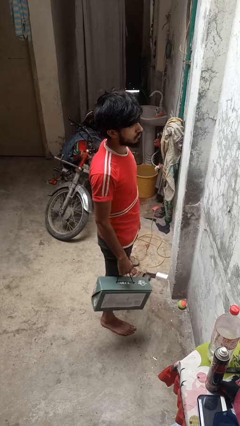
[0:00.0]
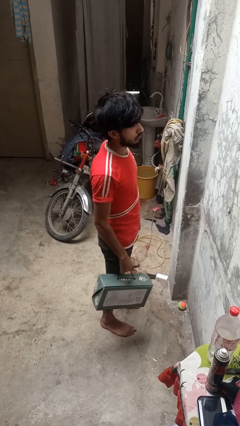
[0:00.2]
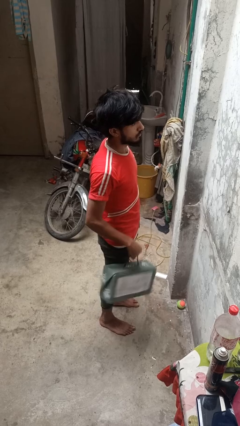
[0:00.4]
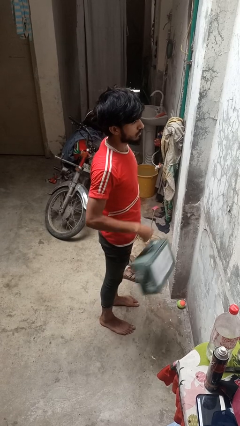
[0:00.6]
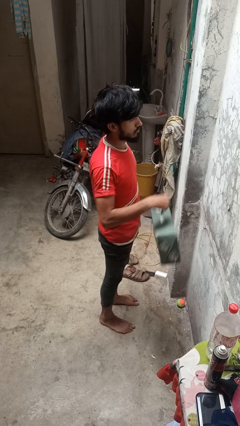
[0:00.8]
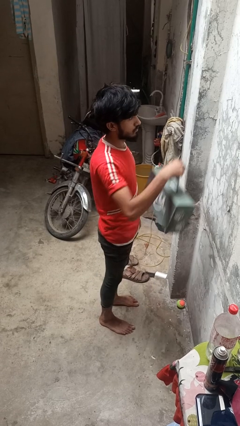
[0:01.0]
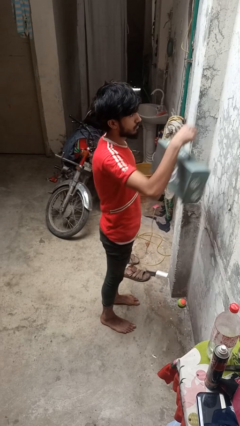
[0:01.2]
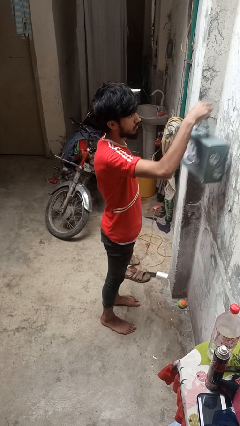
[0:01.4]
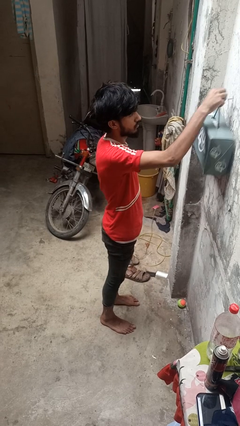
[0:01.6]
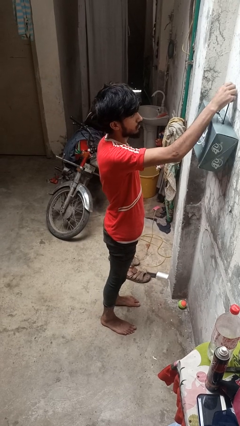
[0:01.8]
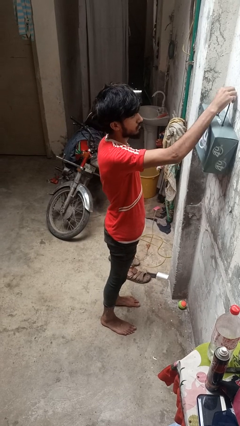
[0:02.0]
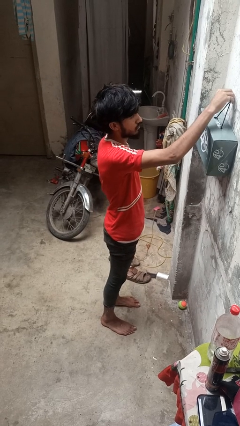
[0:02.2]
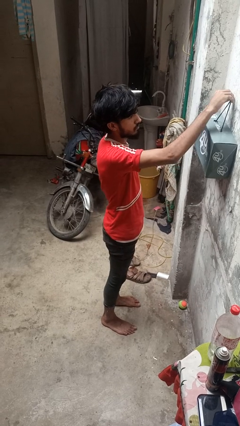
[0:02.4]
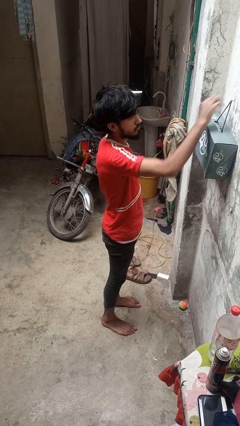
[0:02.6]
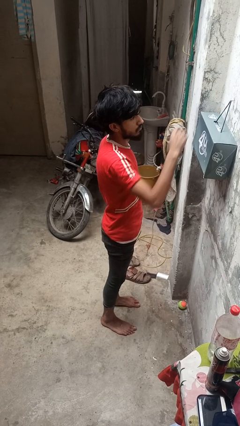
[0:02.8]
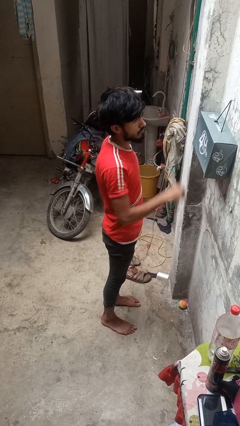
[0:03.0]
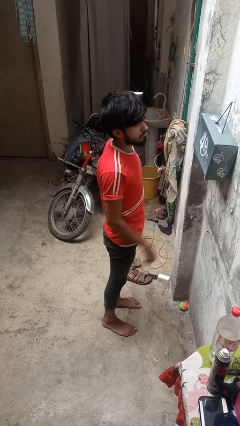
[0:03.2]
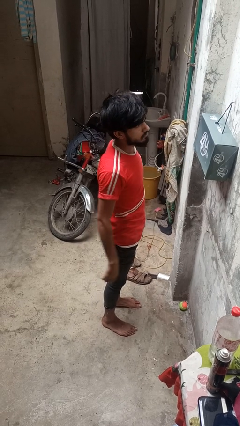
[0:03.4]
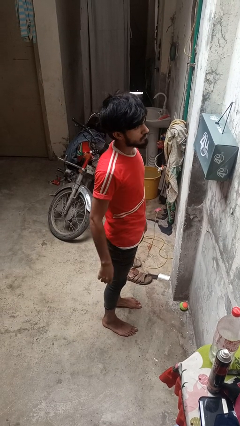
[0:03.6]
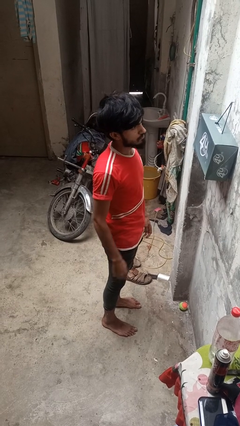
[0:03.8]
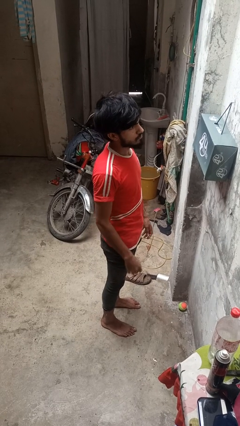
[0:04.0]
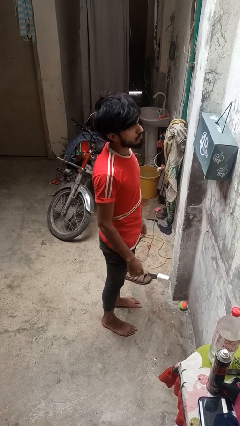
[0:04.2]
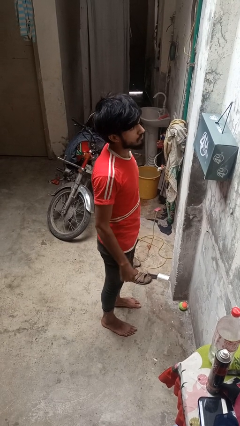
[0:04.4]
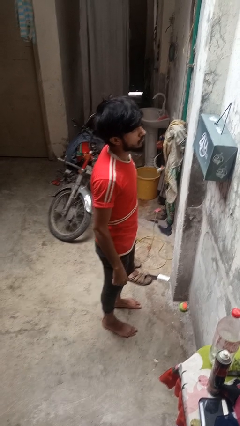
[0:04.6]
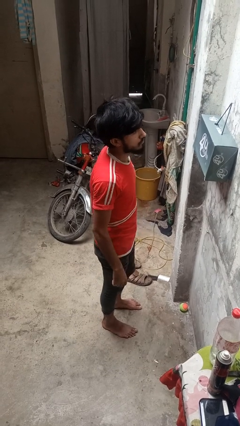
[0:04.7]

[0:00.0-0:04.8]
person puts up smoke detector

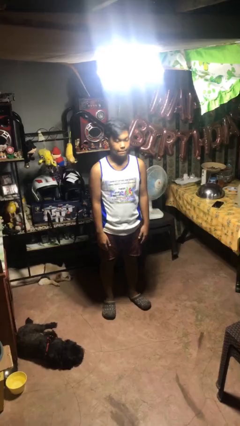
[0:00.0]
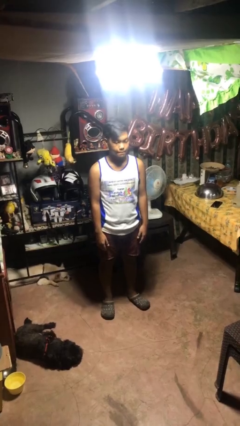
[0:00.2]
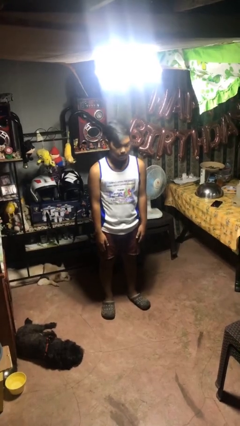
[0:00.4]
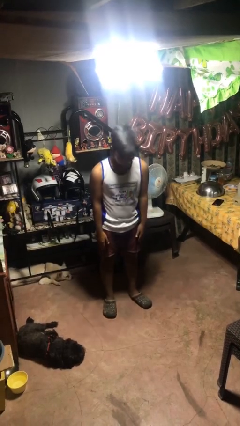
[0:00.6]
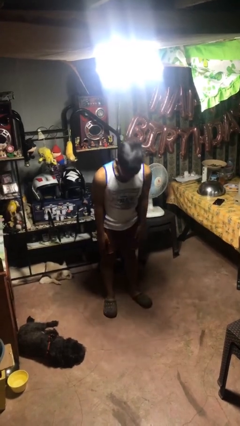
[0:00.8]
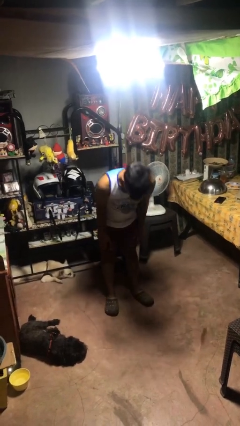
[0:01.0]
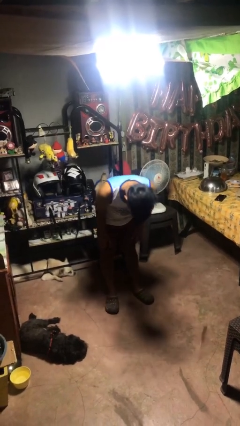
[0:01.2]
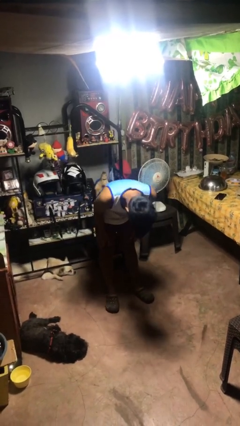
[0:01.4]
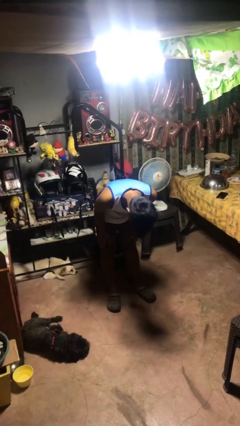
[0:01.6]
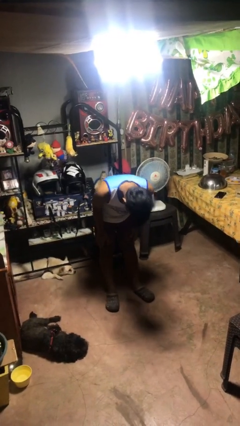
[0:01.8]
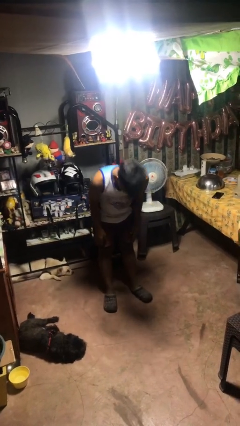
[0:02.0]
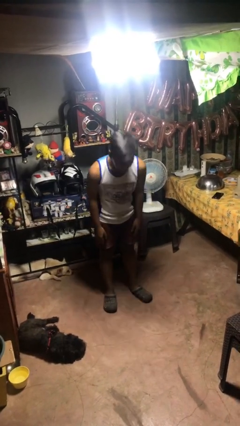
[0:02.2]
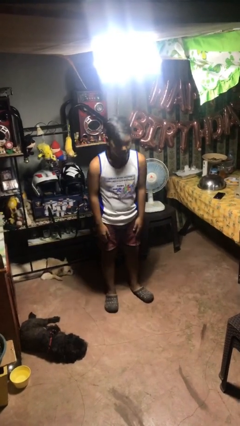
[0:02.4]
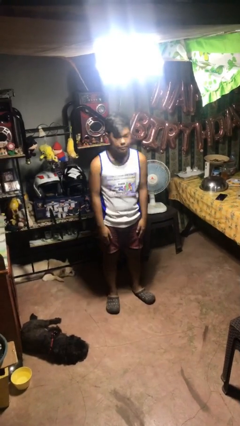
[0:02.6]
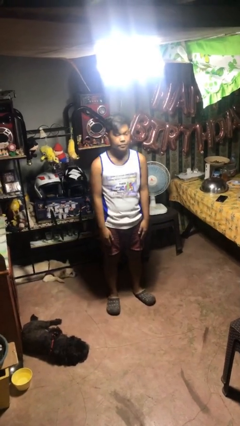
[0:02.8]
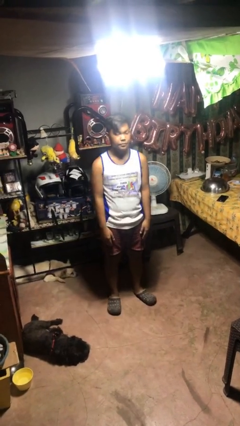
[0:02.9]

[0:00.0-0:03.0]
person bows

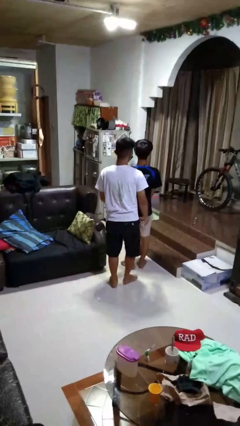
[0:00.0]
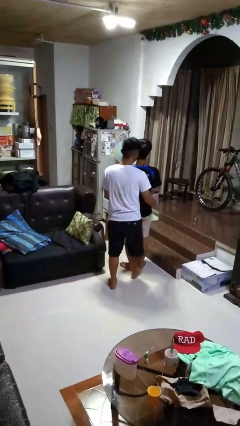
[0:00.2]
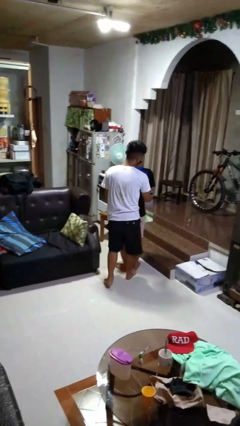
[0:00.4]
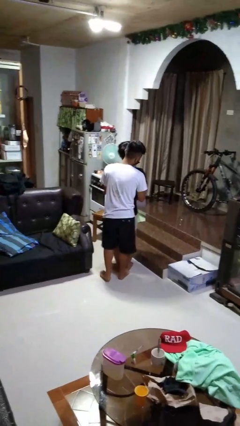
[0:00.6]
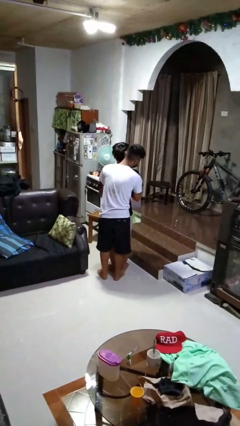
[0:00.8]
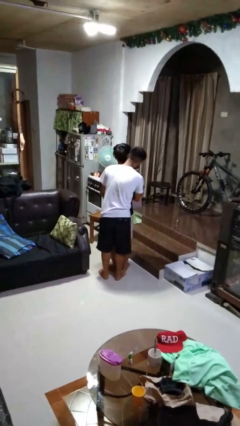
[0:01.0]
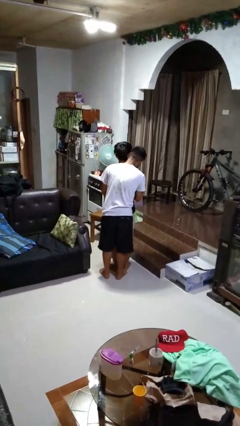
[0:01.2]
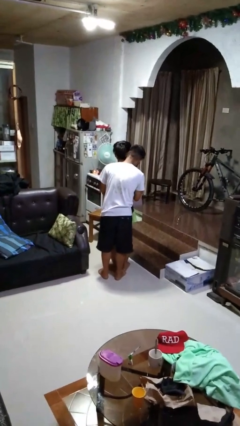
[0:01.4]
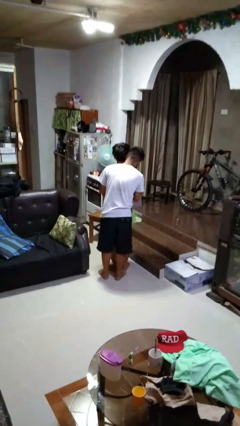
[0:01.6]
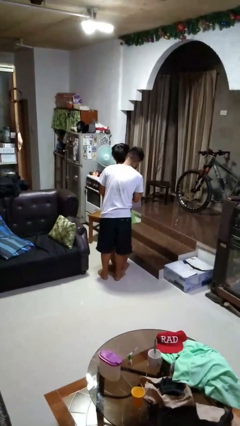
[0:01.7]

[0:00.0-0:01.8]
person hugs person from behind

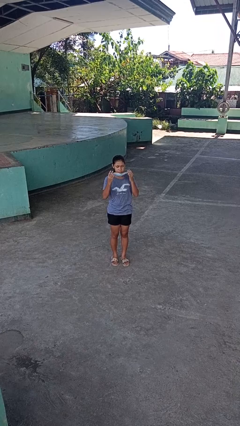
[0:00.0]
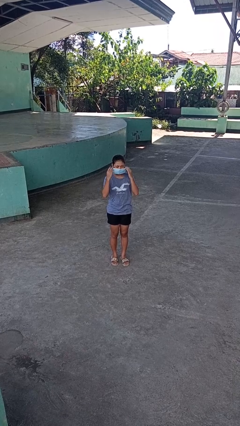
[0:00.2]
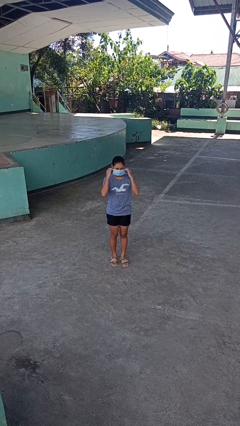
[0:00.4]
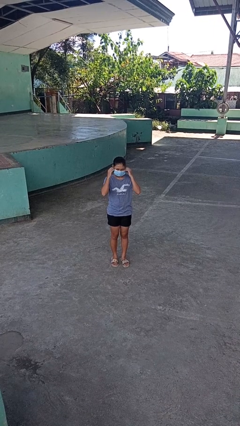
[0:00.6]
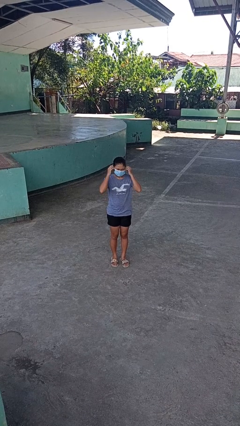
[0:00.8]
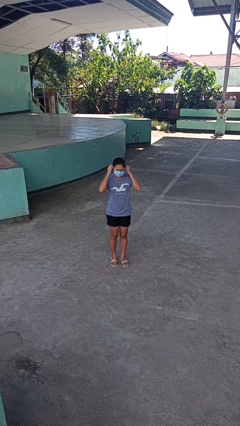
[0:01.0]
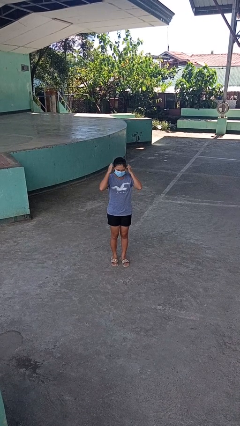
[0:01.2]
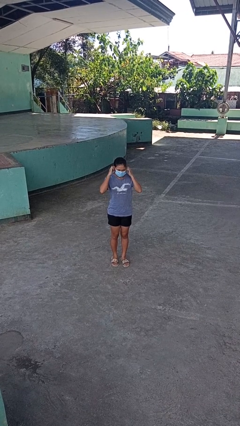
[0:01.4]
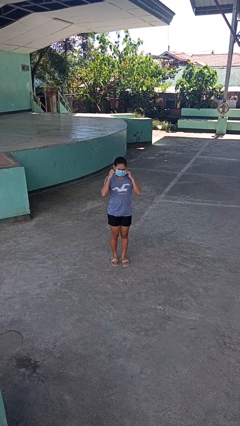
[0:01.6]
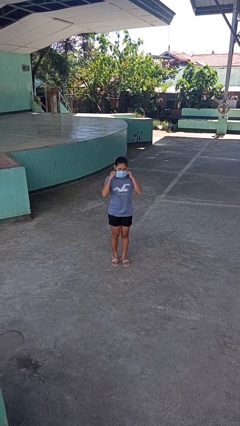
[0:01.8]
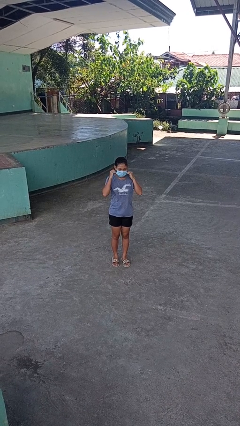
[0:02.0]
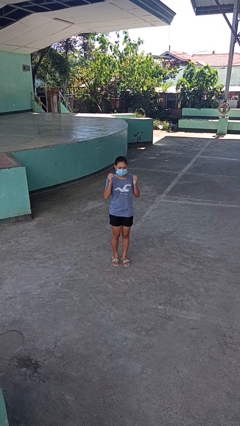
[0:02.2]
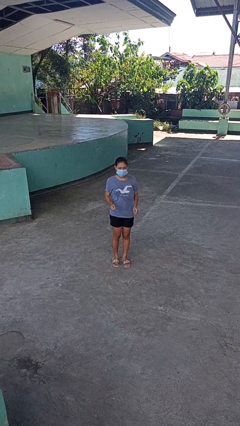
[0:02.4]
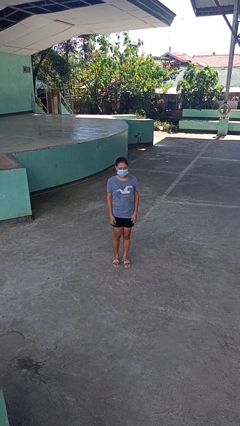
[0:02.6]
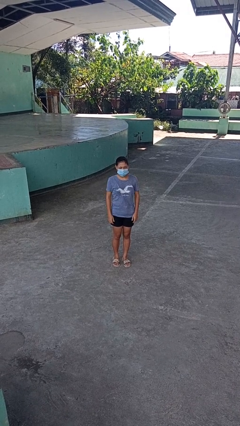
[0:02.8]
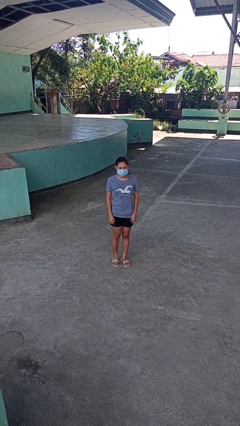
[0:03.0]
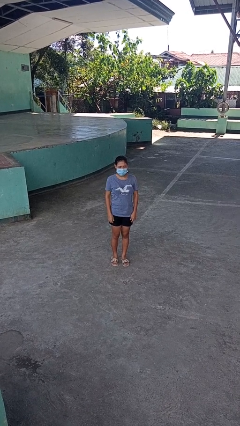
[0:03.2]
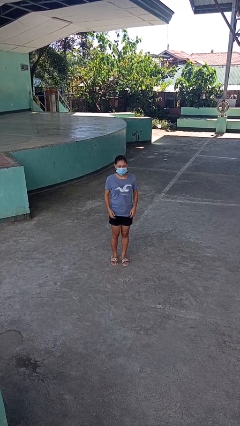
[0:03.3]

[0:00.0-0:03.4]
person puts on facemask

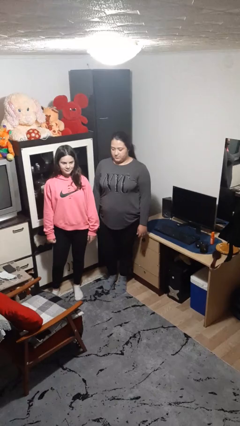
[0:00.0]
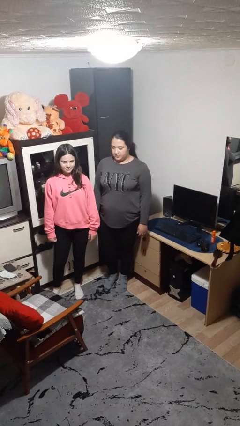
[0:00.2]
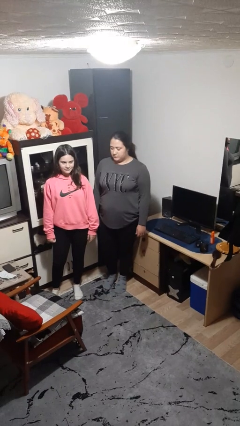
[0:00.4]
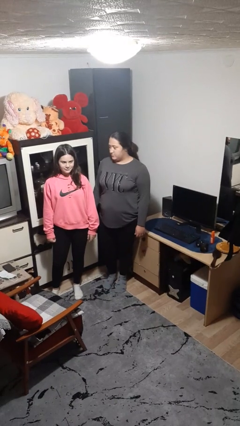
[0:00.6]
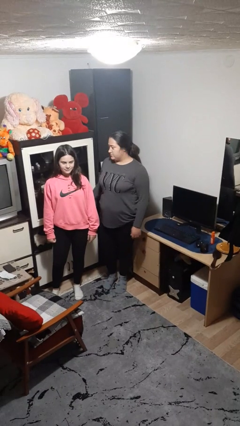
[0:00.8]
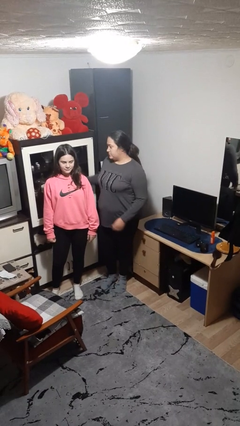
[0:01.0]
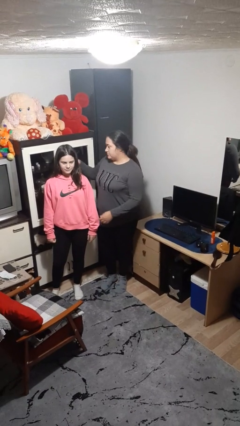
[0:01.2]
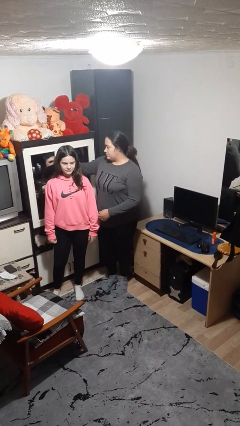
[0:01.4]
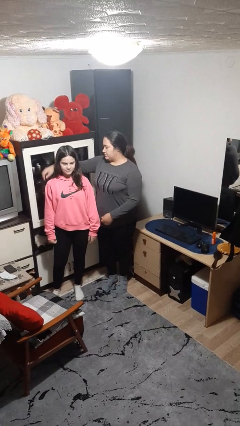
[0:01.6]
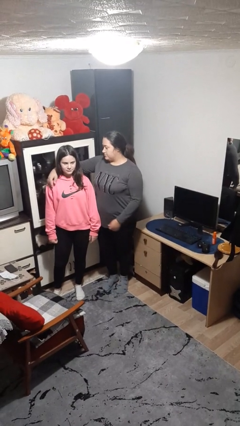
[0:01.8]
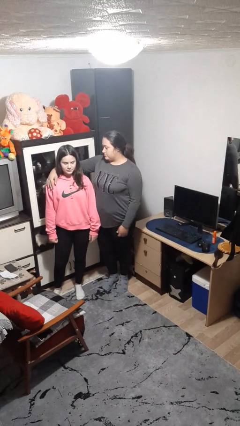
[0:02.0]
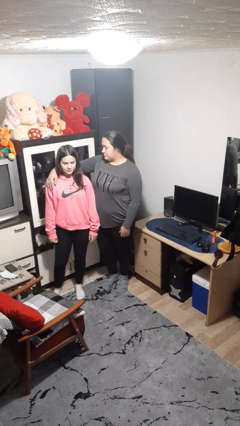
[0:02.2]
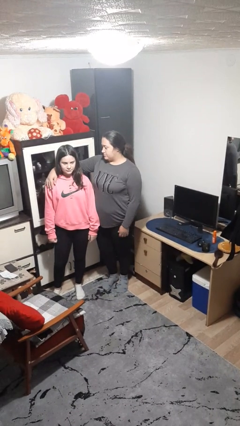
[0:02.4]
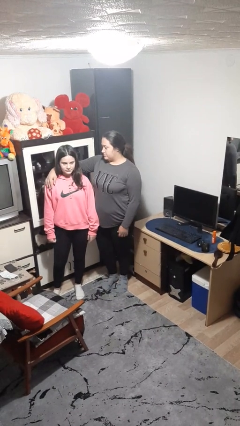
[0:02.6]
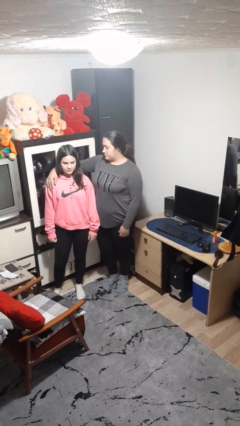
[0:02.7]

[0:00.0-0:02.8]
person hugs person from side

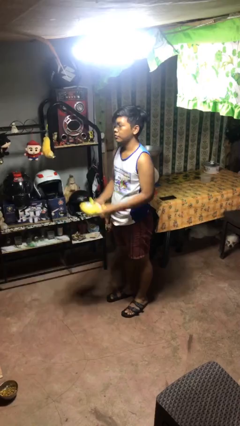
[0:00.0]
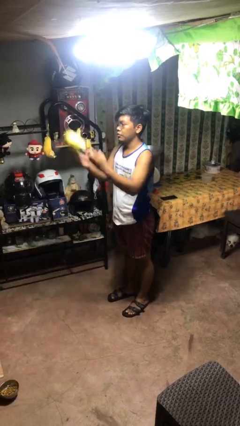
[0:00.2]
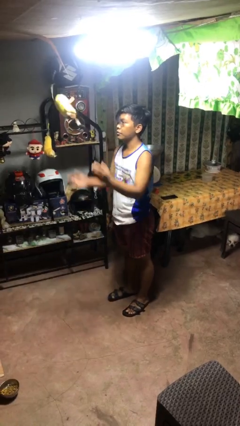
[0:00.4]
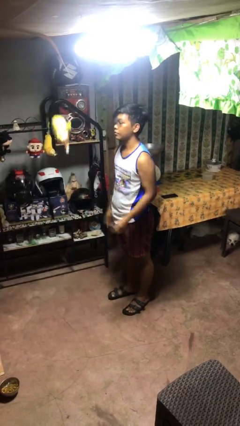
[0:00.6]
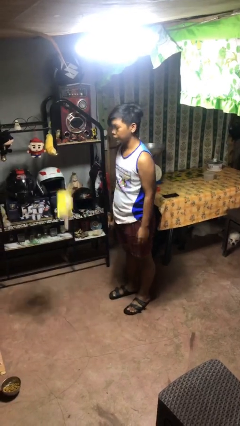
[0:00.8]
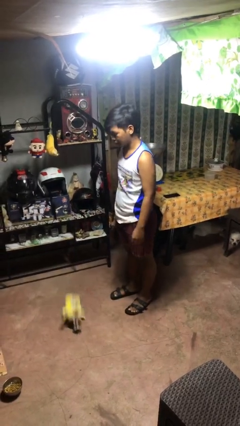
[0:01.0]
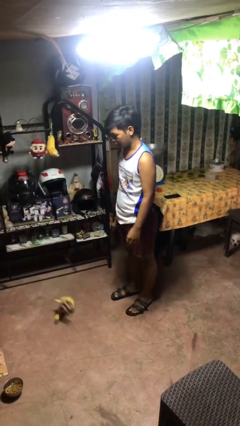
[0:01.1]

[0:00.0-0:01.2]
person throws object into air

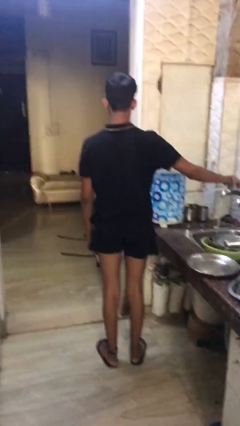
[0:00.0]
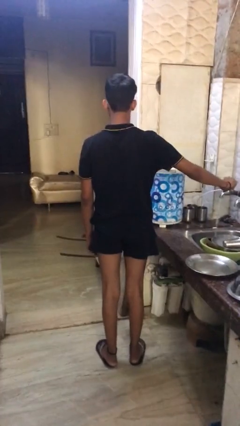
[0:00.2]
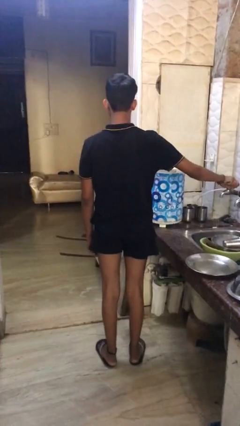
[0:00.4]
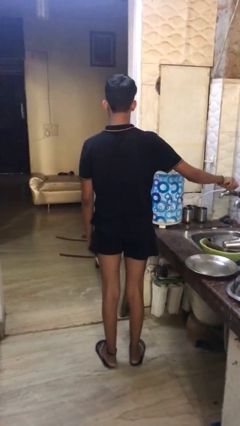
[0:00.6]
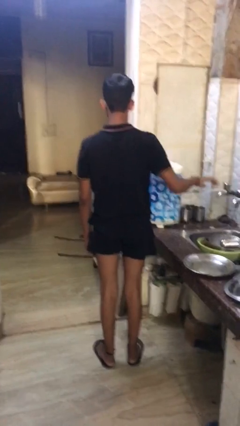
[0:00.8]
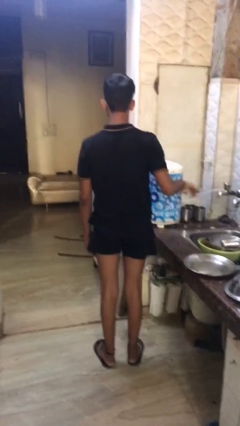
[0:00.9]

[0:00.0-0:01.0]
person turns off faucet
